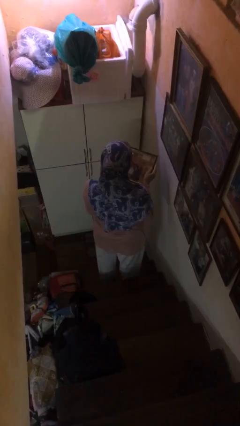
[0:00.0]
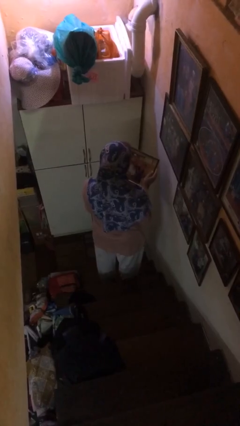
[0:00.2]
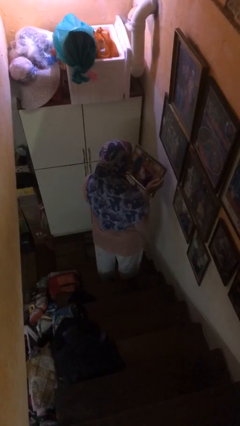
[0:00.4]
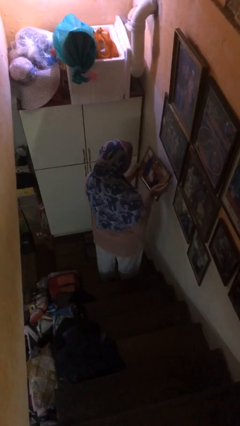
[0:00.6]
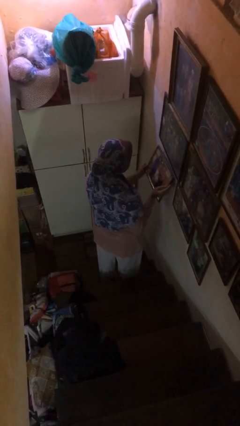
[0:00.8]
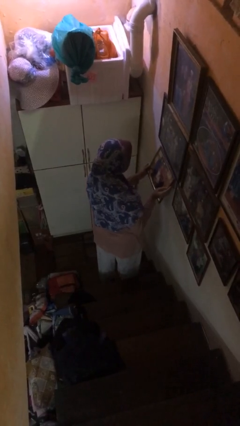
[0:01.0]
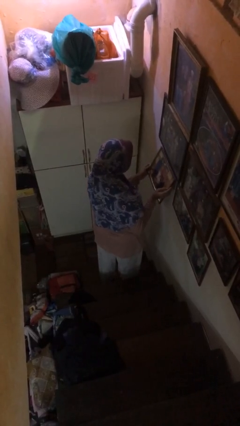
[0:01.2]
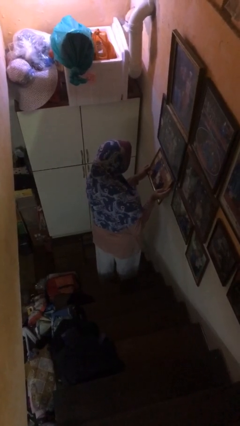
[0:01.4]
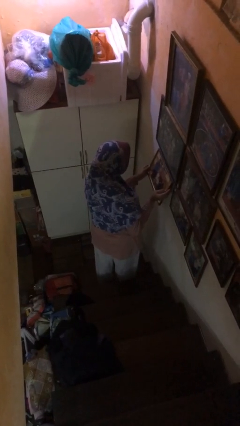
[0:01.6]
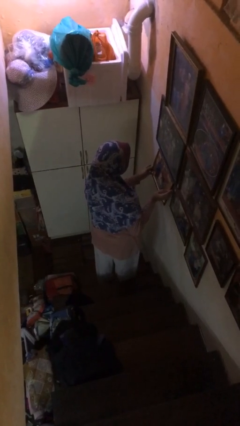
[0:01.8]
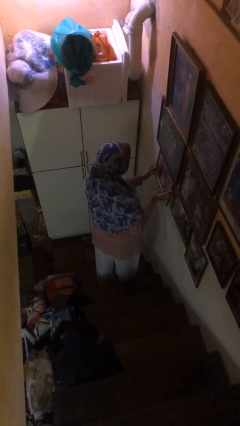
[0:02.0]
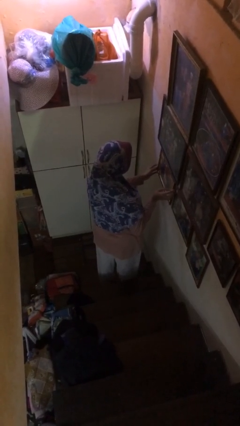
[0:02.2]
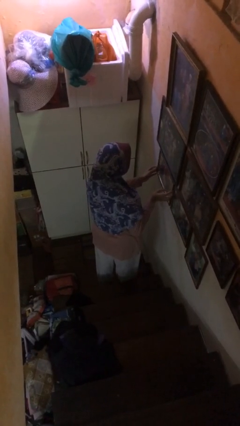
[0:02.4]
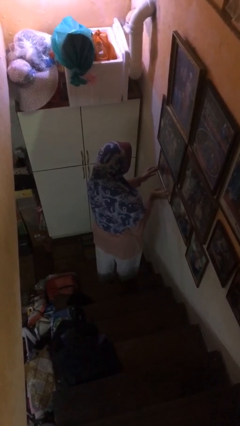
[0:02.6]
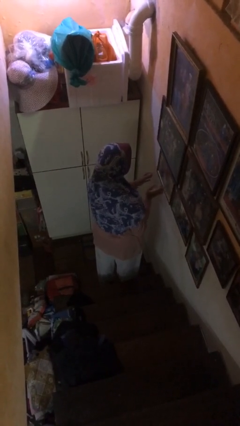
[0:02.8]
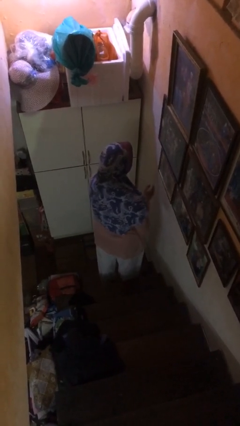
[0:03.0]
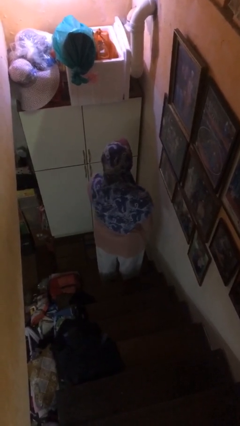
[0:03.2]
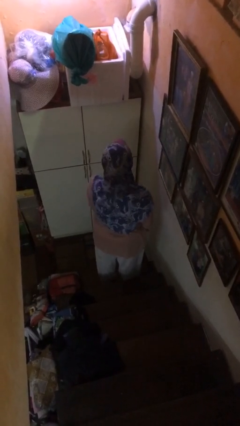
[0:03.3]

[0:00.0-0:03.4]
person takes down picture frame

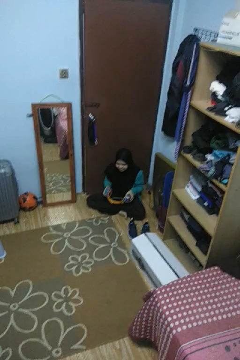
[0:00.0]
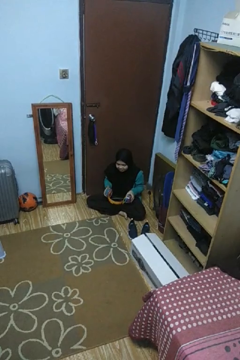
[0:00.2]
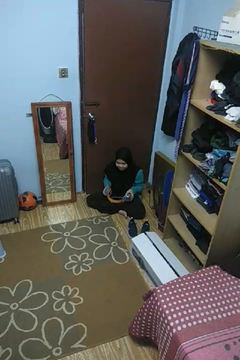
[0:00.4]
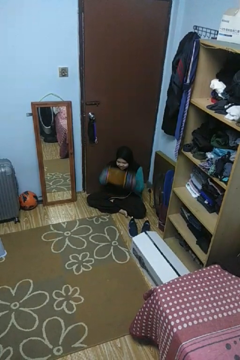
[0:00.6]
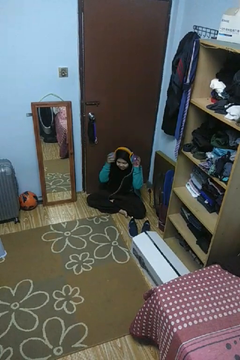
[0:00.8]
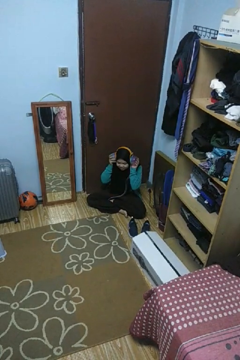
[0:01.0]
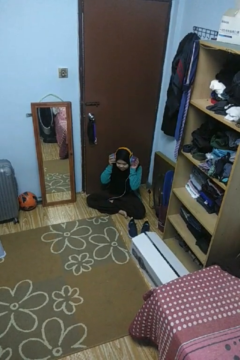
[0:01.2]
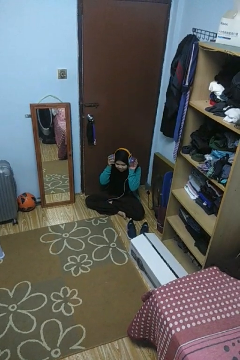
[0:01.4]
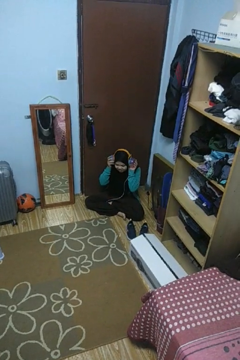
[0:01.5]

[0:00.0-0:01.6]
person puts on headphones

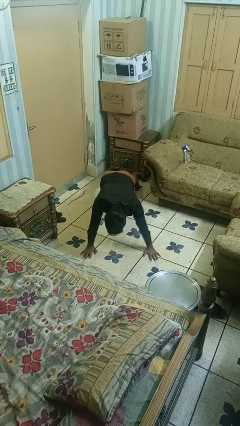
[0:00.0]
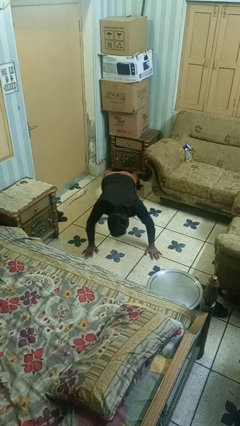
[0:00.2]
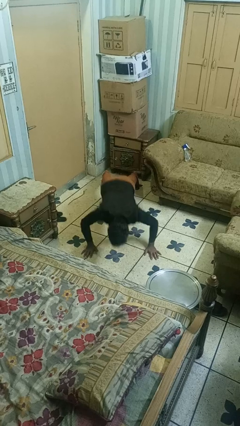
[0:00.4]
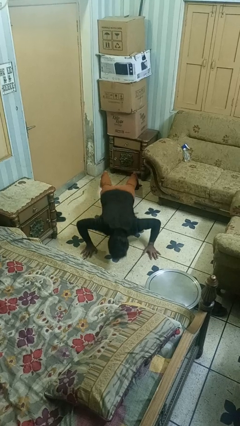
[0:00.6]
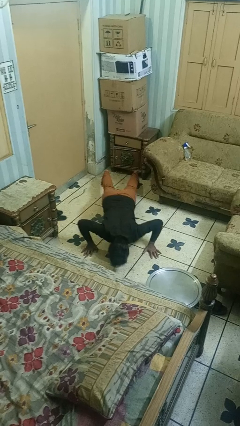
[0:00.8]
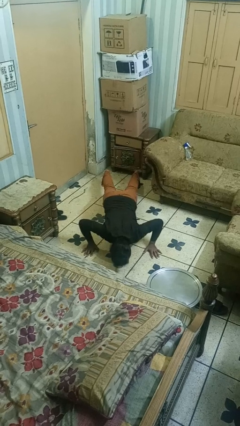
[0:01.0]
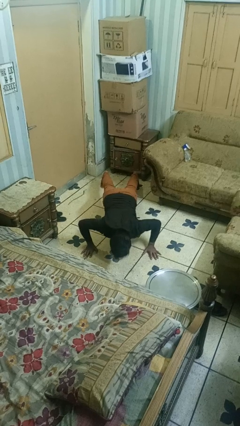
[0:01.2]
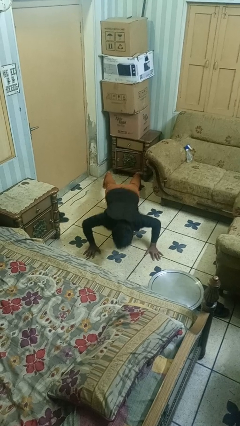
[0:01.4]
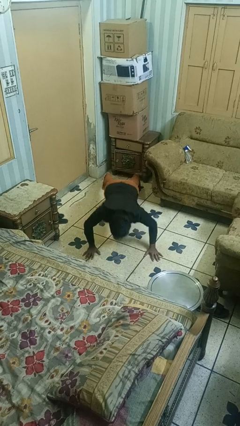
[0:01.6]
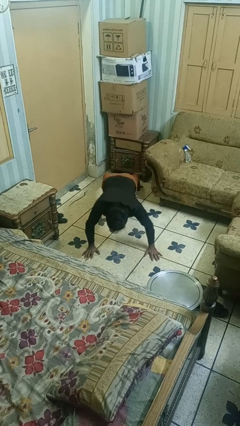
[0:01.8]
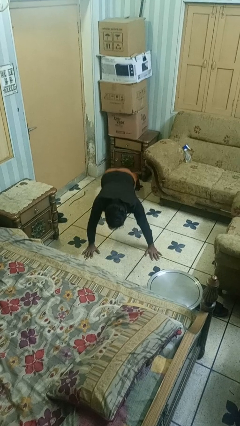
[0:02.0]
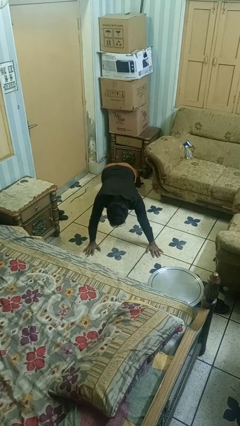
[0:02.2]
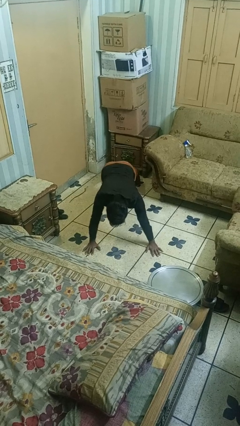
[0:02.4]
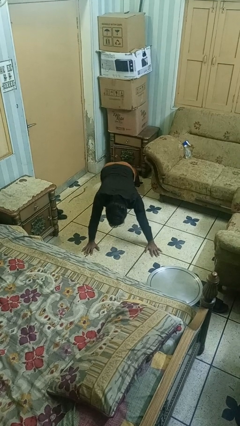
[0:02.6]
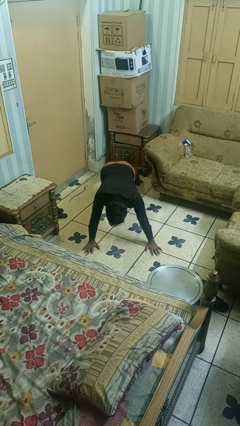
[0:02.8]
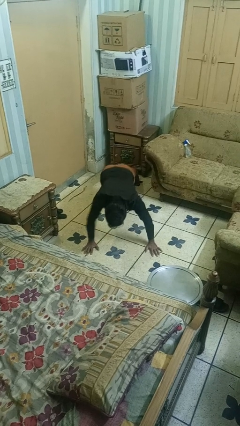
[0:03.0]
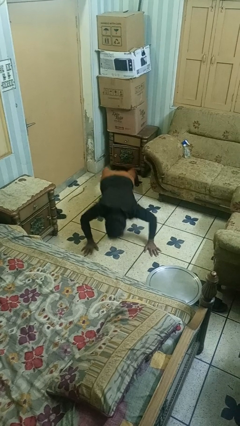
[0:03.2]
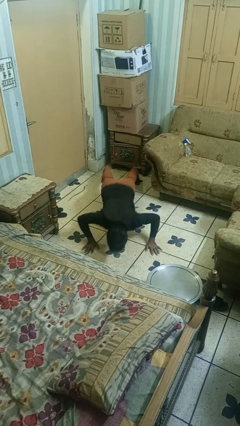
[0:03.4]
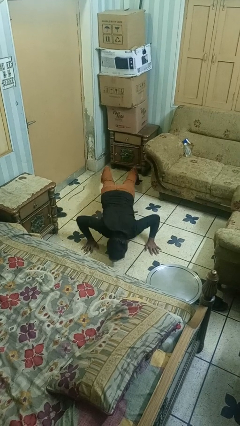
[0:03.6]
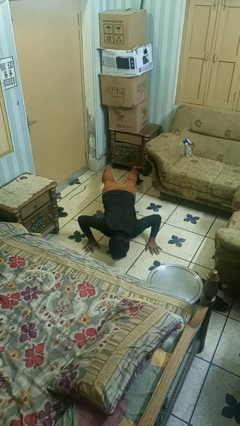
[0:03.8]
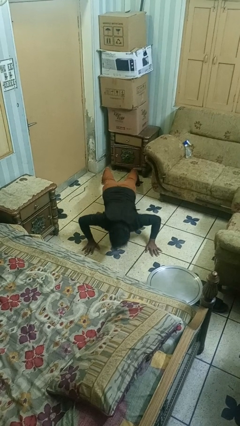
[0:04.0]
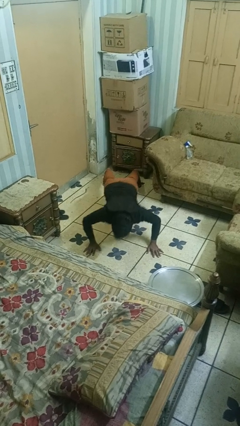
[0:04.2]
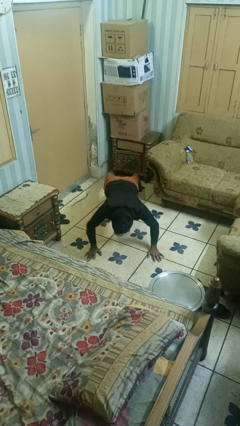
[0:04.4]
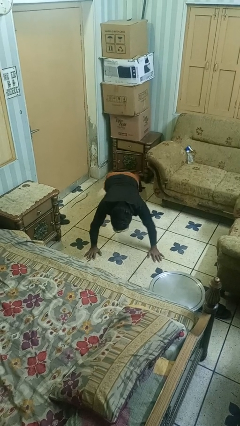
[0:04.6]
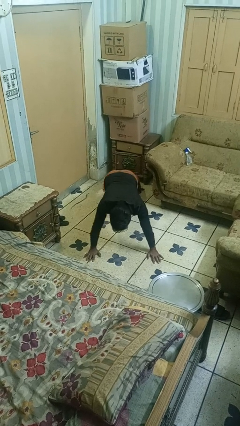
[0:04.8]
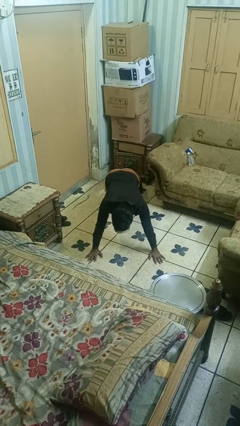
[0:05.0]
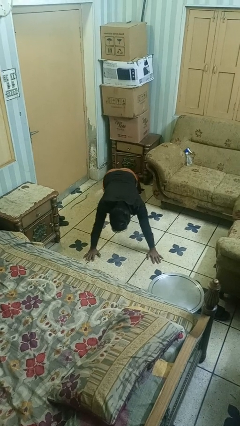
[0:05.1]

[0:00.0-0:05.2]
person exercises with pushup

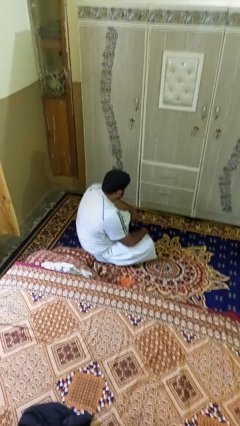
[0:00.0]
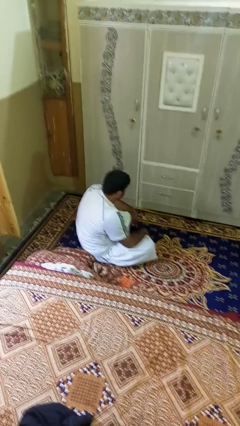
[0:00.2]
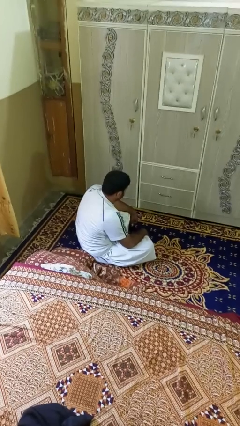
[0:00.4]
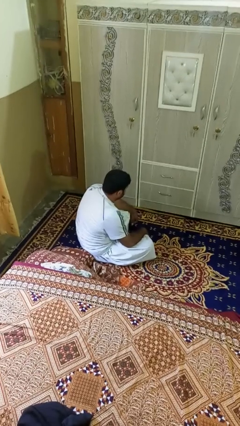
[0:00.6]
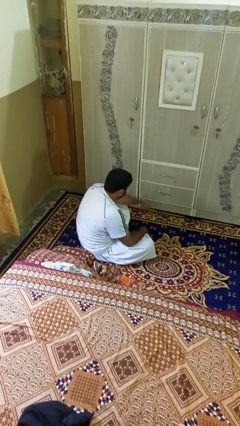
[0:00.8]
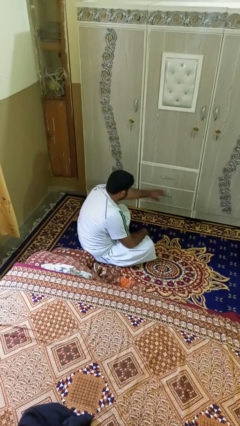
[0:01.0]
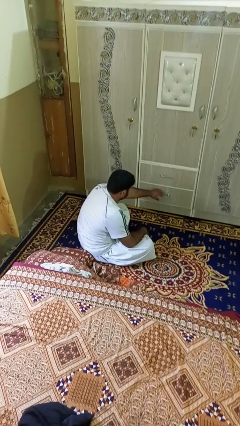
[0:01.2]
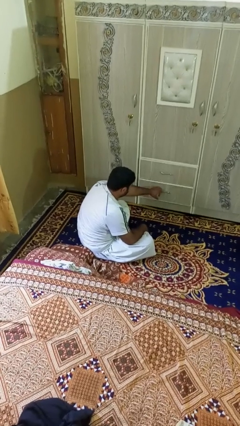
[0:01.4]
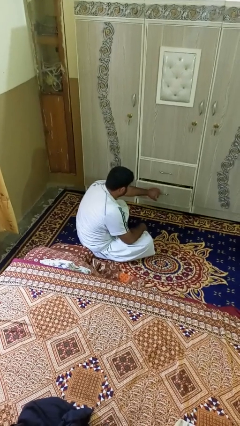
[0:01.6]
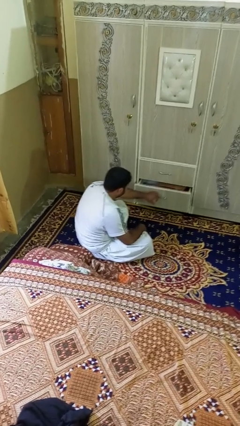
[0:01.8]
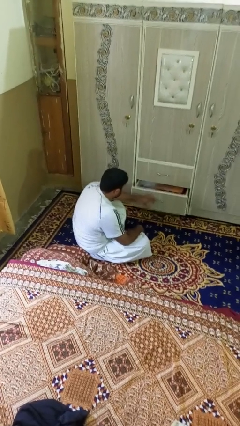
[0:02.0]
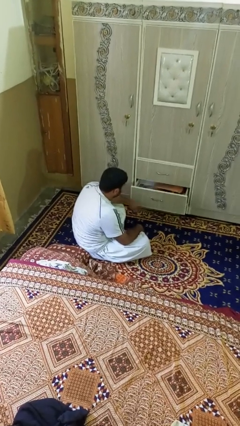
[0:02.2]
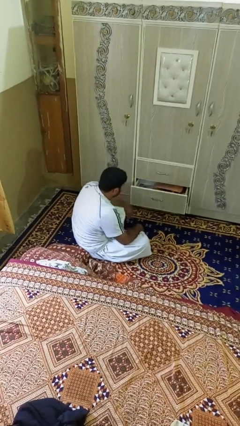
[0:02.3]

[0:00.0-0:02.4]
person opens dresser drawer

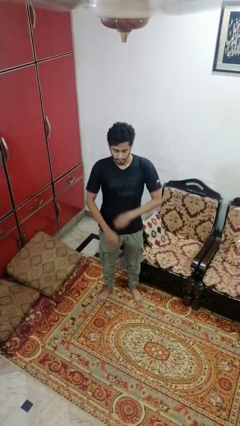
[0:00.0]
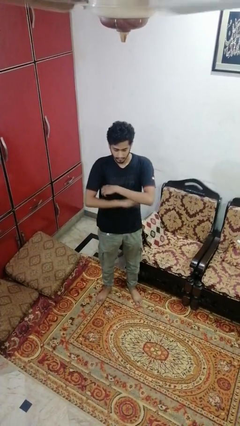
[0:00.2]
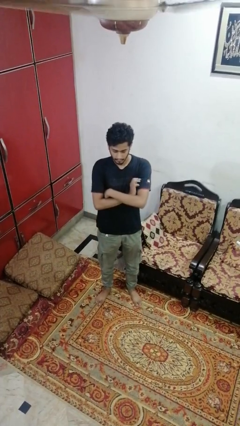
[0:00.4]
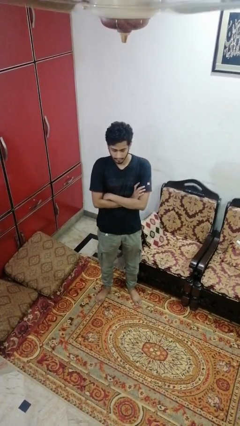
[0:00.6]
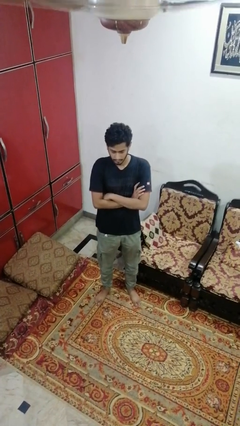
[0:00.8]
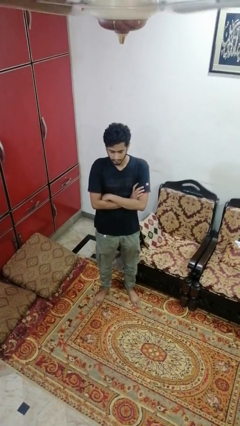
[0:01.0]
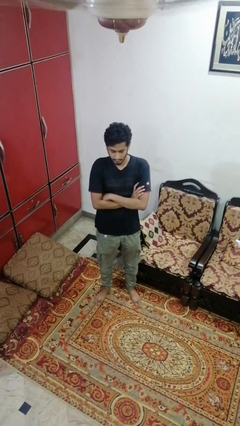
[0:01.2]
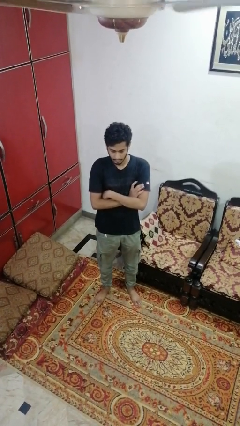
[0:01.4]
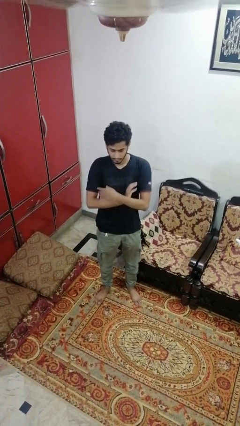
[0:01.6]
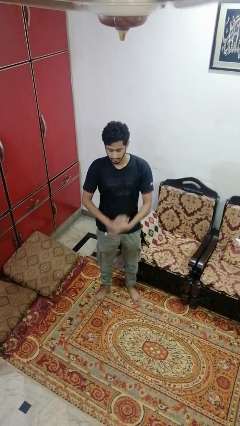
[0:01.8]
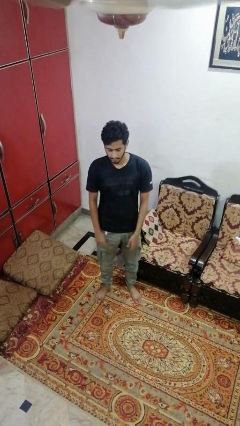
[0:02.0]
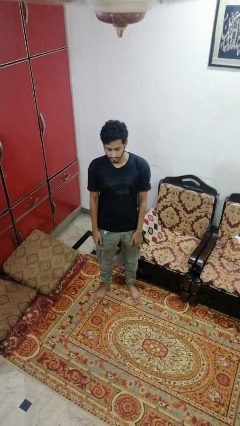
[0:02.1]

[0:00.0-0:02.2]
person crosses arms

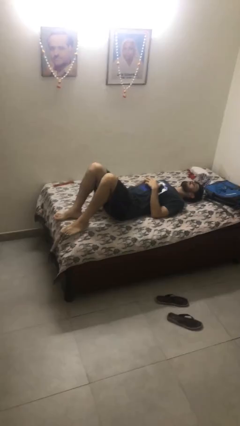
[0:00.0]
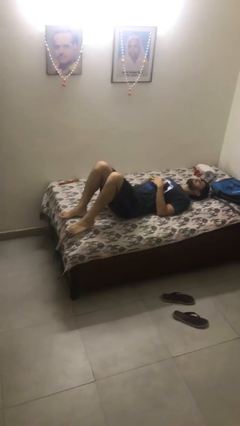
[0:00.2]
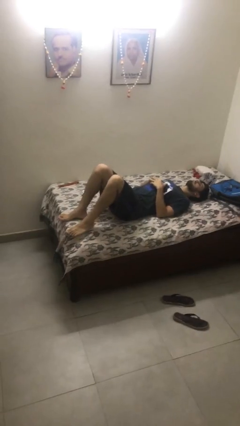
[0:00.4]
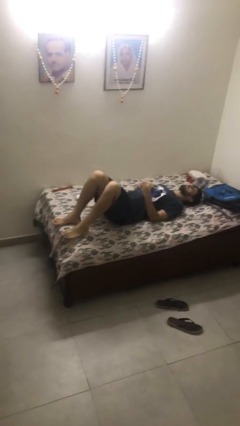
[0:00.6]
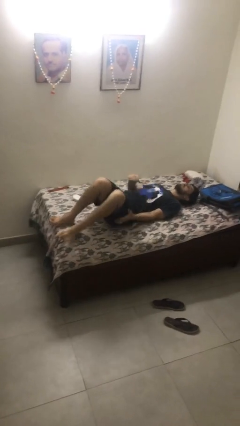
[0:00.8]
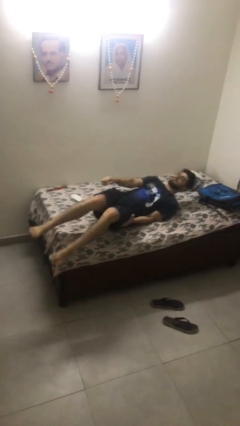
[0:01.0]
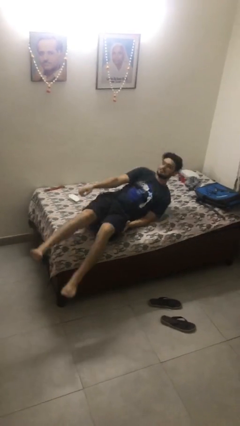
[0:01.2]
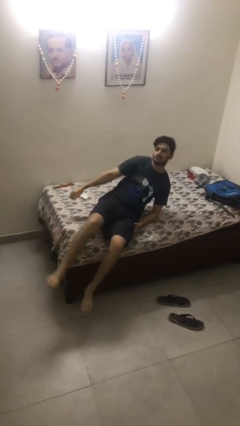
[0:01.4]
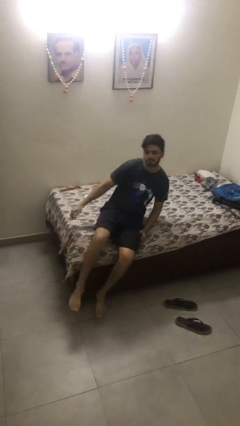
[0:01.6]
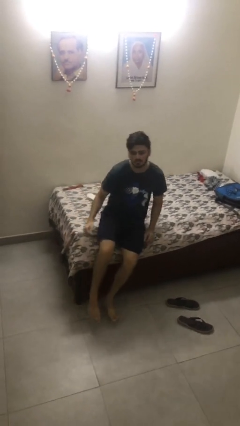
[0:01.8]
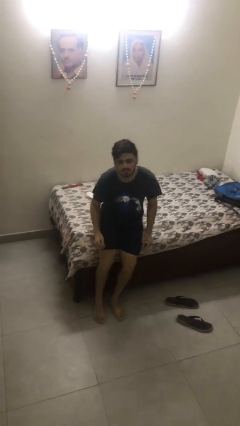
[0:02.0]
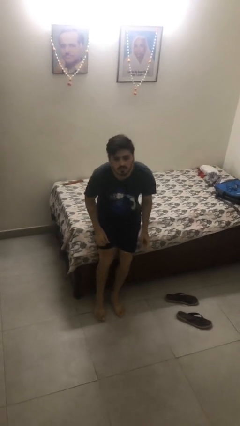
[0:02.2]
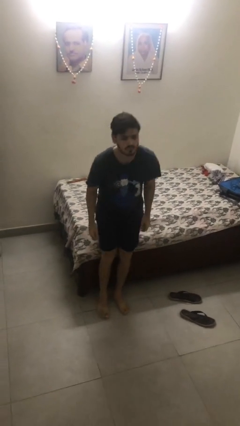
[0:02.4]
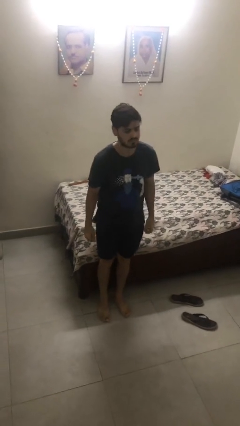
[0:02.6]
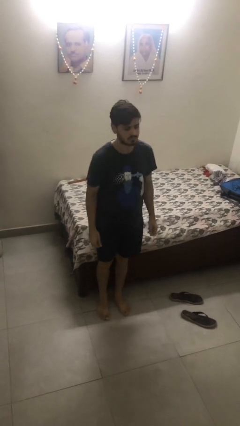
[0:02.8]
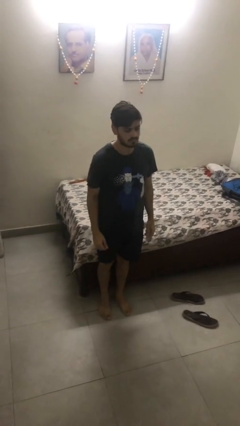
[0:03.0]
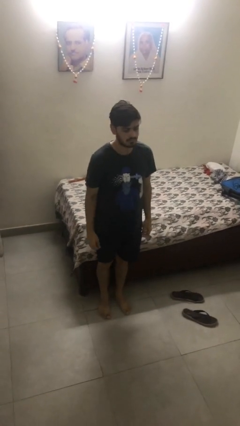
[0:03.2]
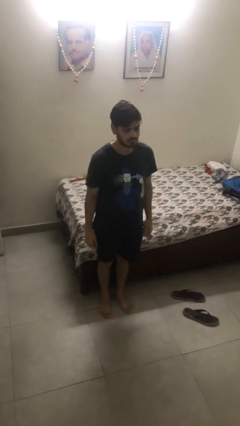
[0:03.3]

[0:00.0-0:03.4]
person stands up
